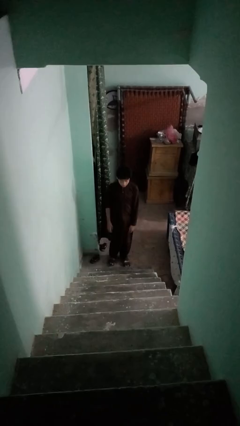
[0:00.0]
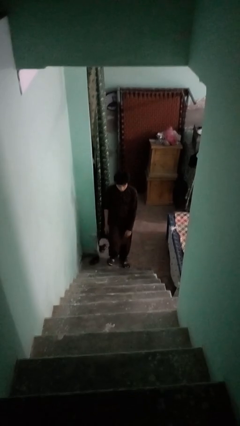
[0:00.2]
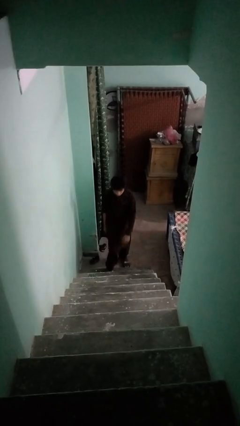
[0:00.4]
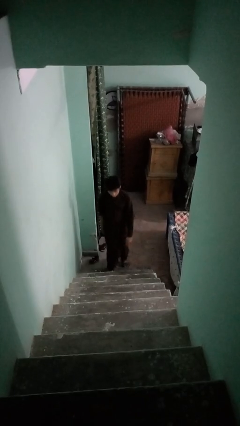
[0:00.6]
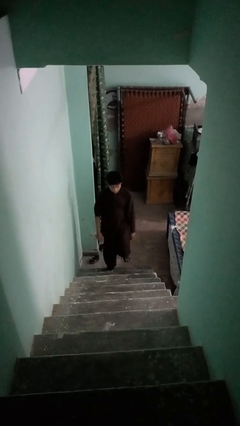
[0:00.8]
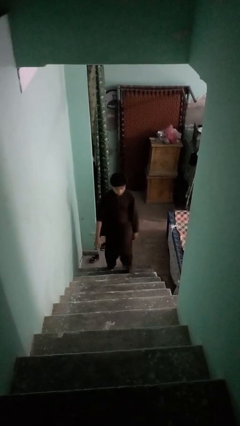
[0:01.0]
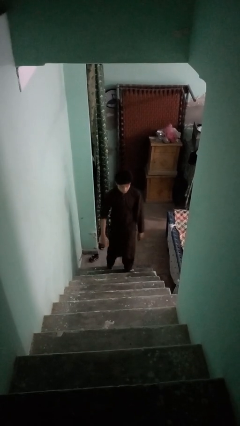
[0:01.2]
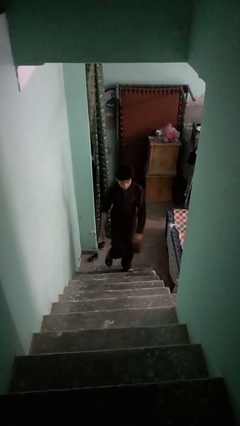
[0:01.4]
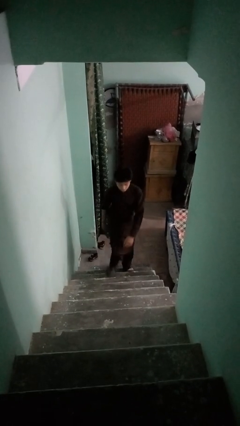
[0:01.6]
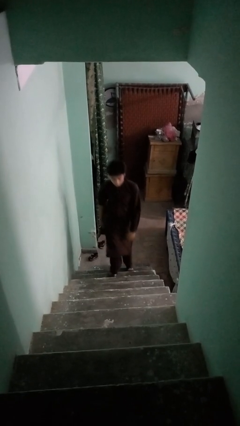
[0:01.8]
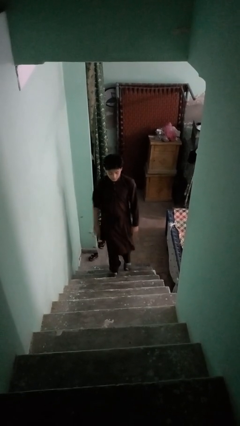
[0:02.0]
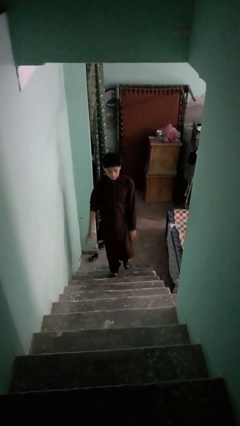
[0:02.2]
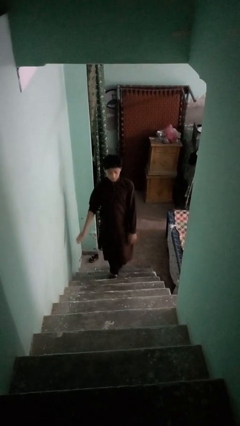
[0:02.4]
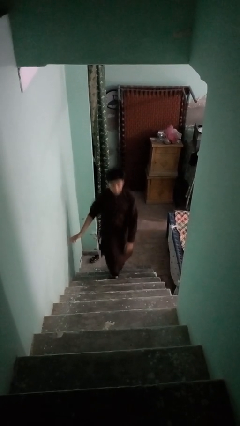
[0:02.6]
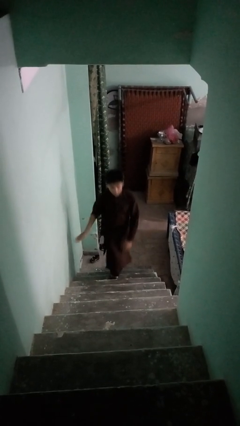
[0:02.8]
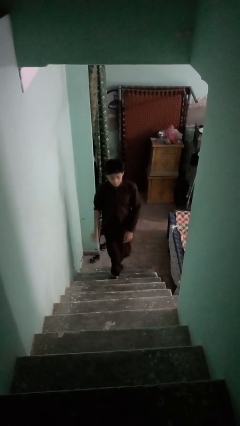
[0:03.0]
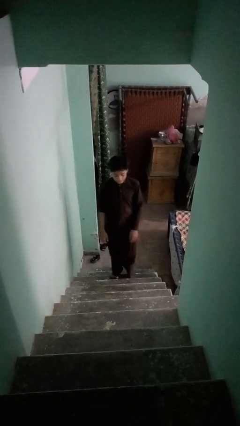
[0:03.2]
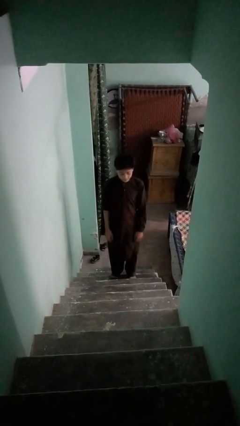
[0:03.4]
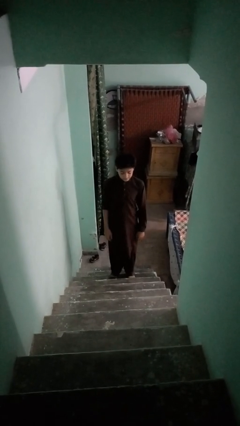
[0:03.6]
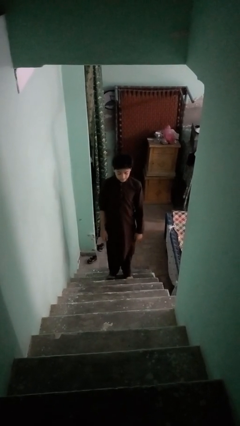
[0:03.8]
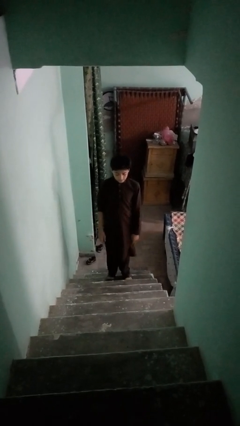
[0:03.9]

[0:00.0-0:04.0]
person climbs up stairs

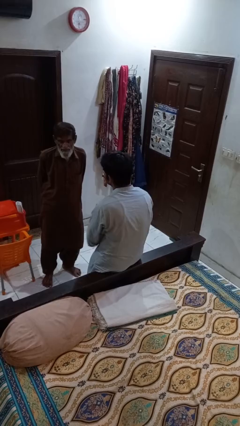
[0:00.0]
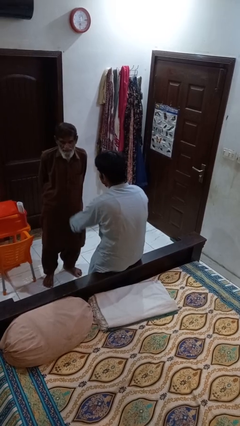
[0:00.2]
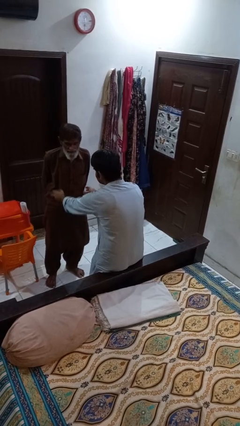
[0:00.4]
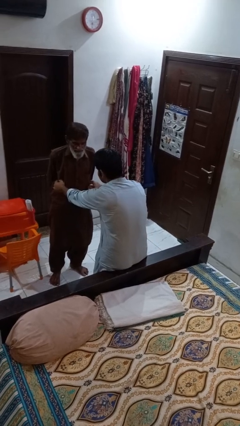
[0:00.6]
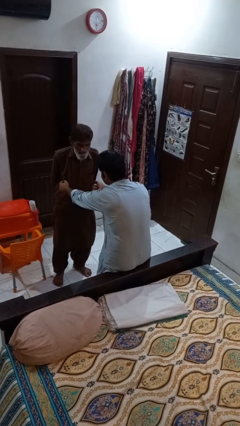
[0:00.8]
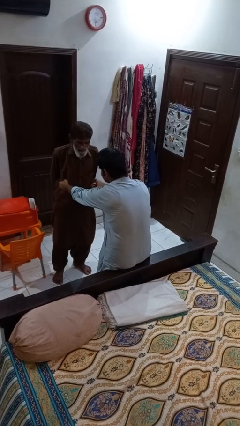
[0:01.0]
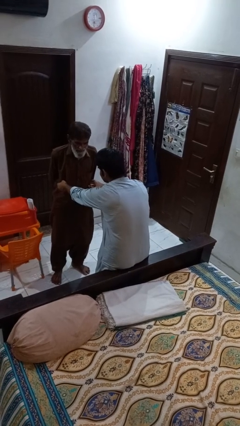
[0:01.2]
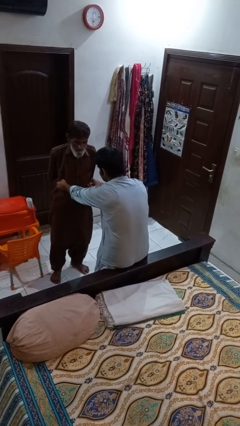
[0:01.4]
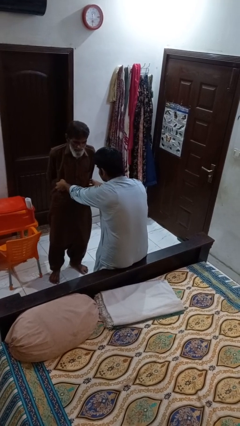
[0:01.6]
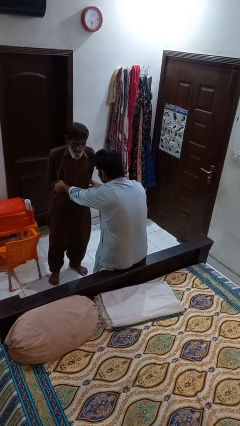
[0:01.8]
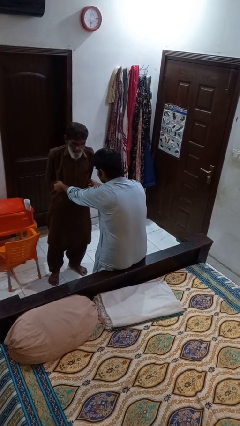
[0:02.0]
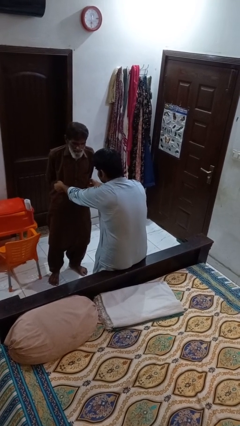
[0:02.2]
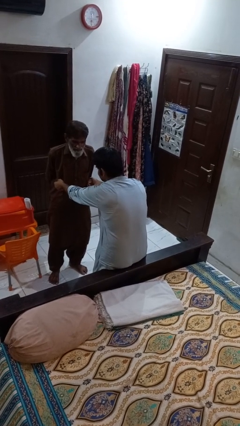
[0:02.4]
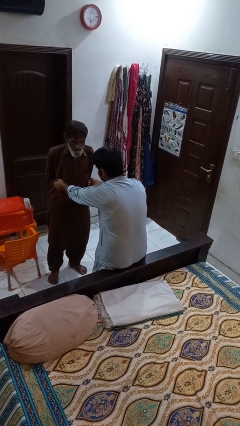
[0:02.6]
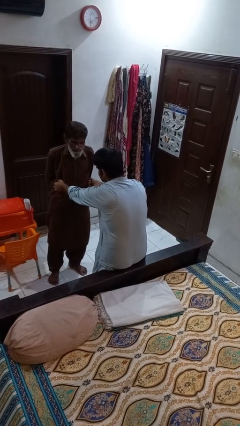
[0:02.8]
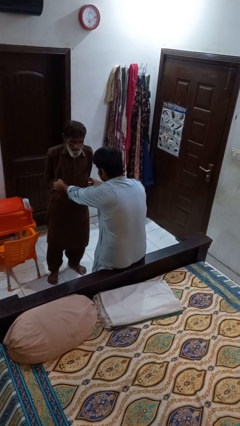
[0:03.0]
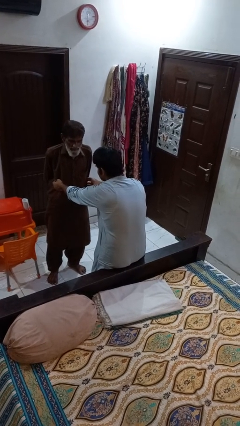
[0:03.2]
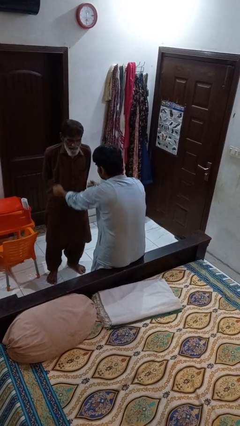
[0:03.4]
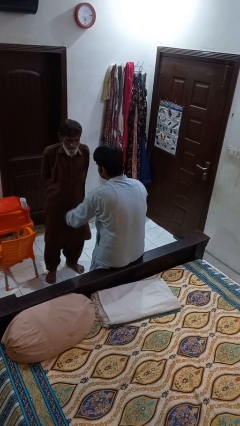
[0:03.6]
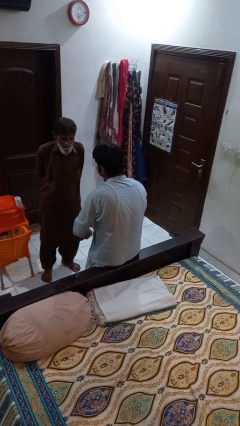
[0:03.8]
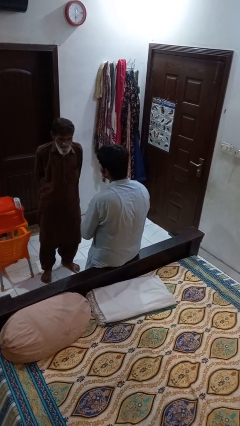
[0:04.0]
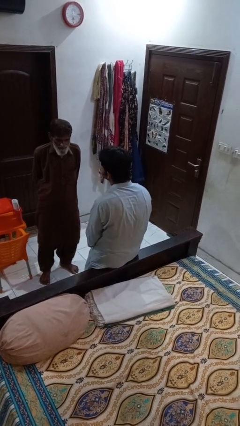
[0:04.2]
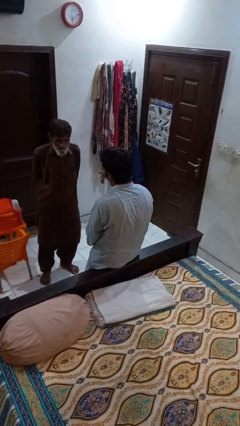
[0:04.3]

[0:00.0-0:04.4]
person tickles person

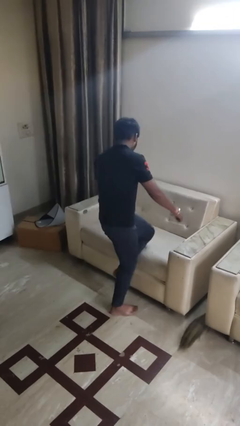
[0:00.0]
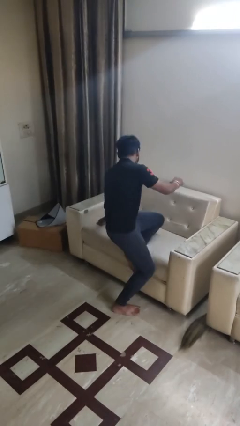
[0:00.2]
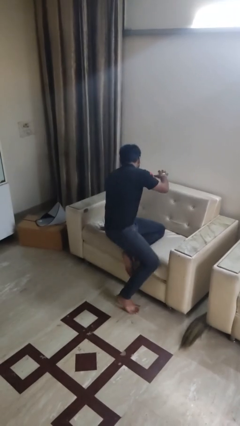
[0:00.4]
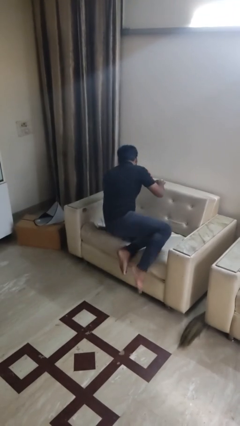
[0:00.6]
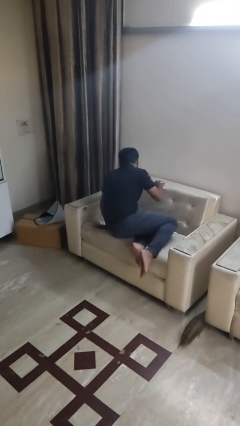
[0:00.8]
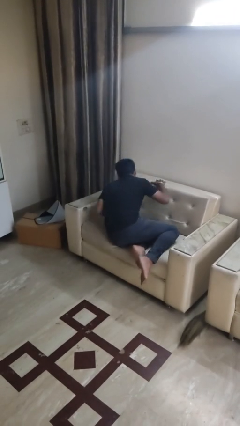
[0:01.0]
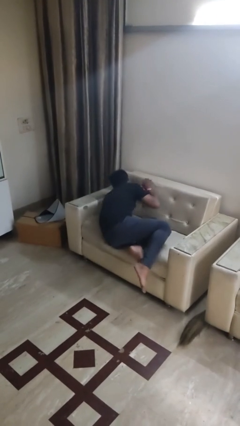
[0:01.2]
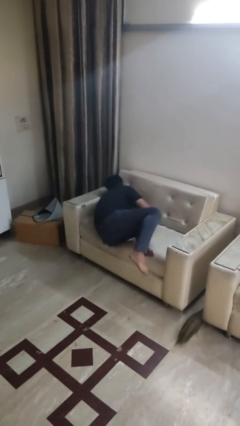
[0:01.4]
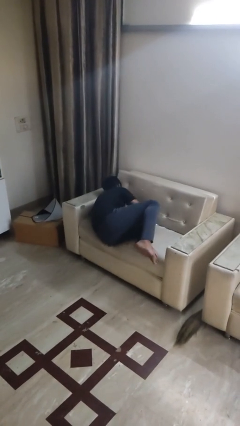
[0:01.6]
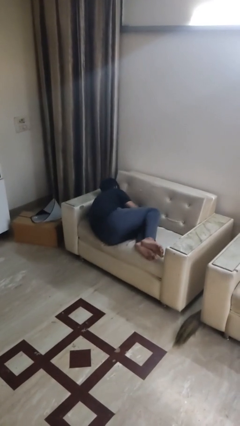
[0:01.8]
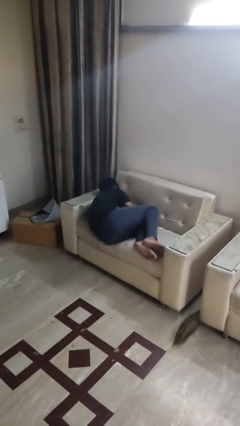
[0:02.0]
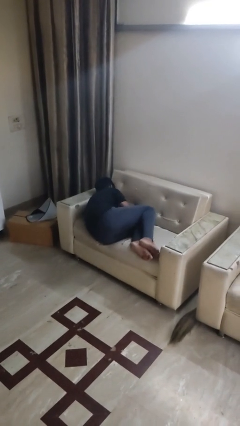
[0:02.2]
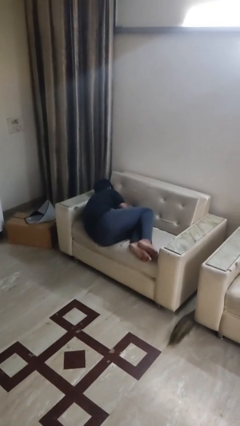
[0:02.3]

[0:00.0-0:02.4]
person lies down on bed

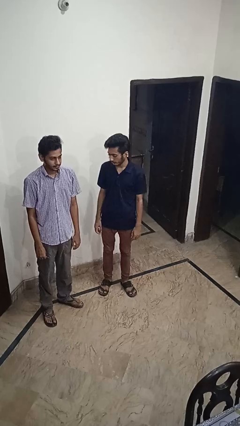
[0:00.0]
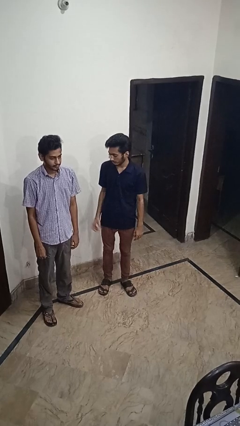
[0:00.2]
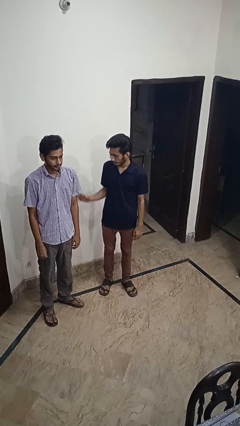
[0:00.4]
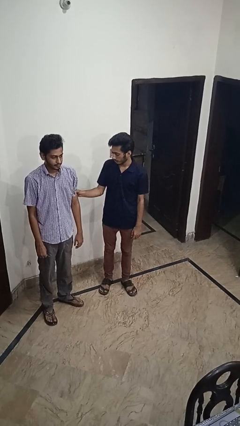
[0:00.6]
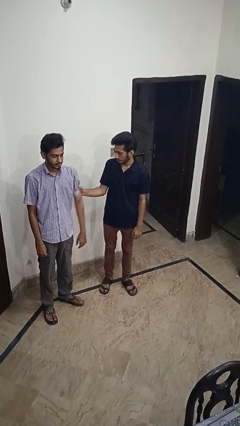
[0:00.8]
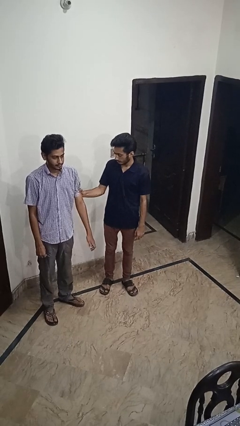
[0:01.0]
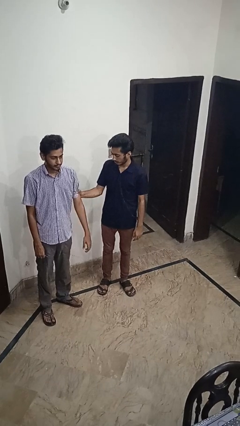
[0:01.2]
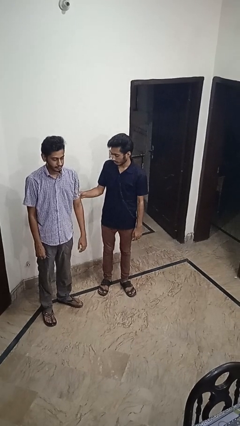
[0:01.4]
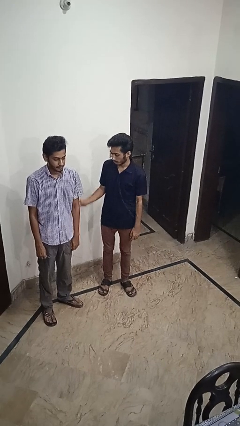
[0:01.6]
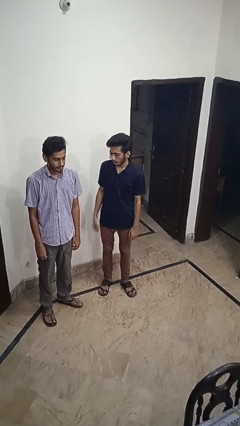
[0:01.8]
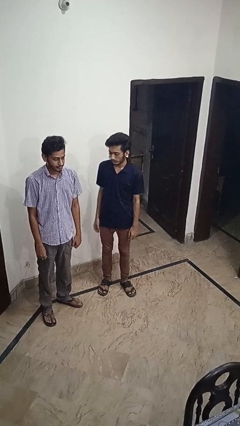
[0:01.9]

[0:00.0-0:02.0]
person grabs person by bicep

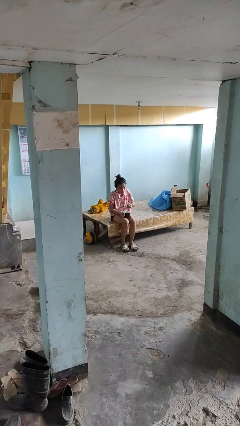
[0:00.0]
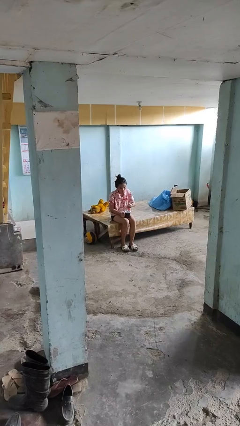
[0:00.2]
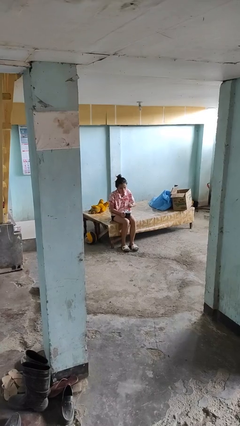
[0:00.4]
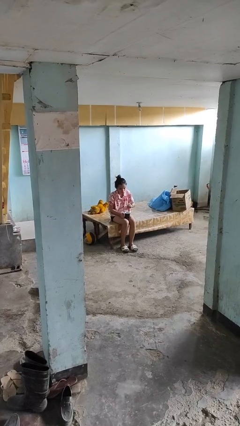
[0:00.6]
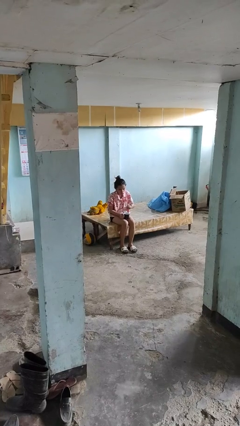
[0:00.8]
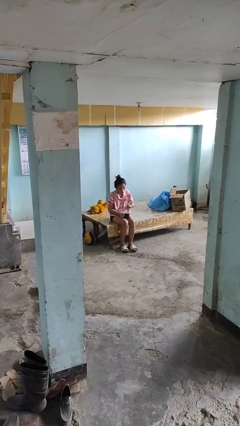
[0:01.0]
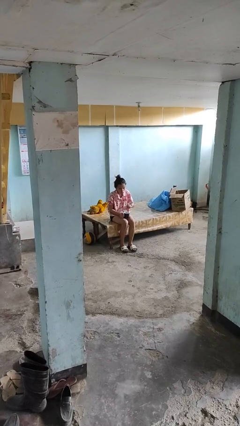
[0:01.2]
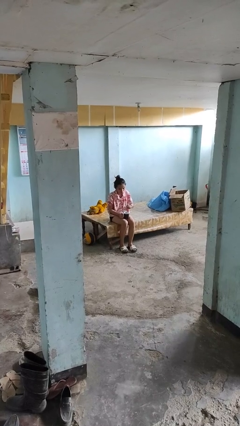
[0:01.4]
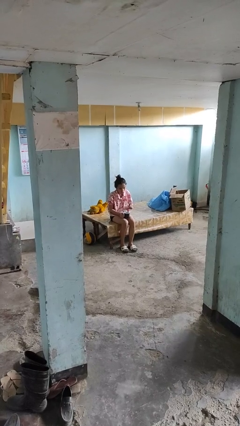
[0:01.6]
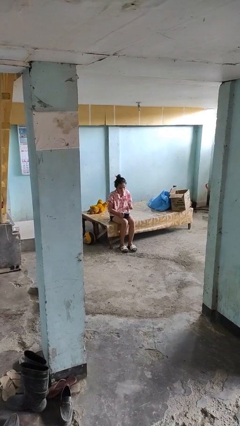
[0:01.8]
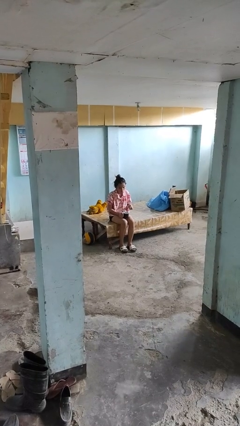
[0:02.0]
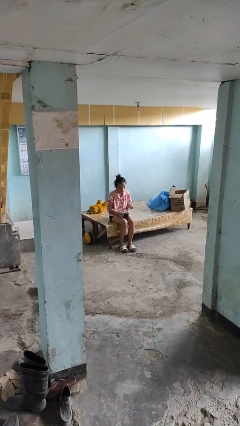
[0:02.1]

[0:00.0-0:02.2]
person stirs mug

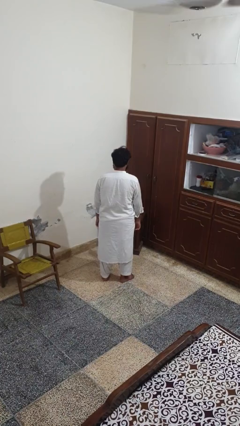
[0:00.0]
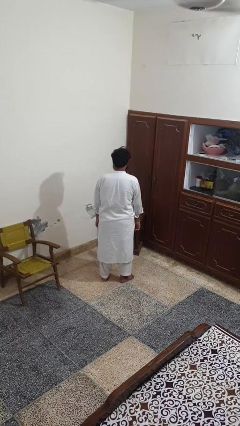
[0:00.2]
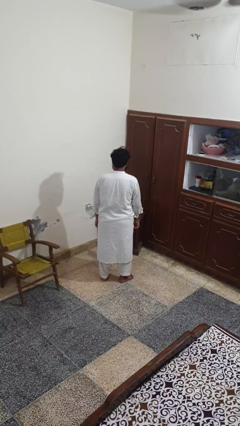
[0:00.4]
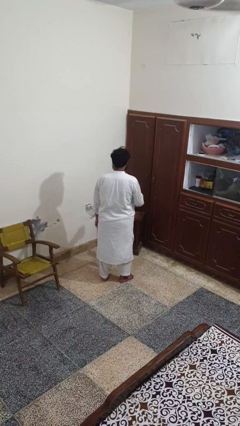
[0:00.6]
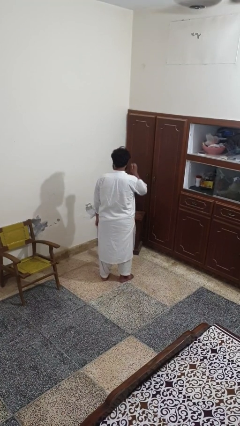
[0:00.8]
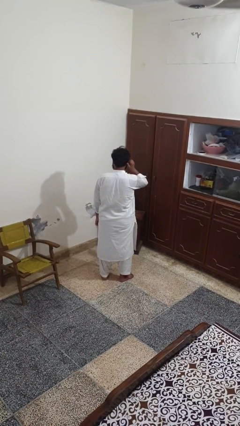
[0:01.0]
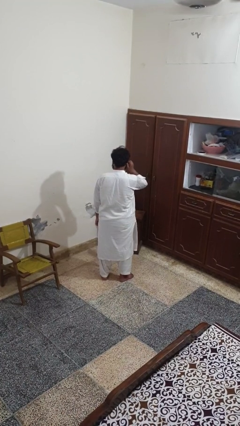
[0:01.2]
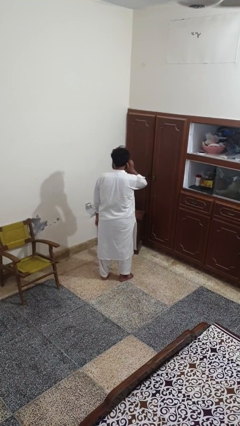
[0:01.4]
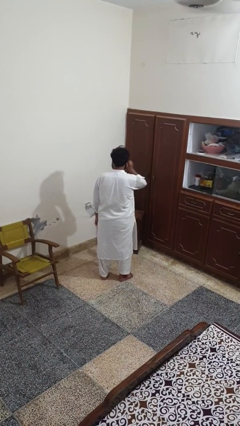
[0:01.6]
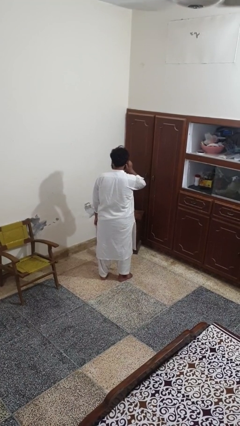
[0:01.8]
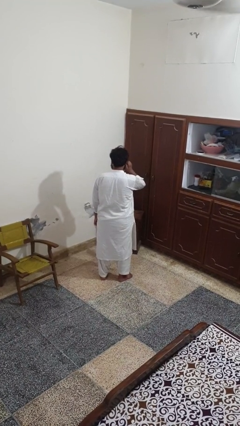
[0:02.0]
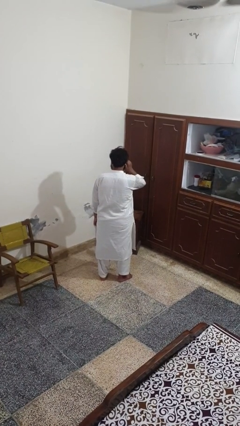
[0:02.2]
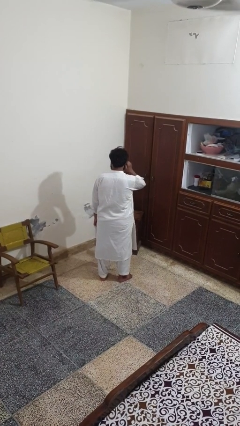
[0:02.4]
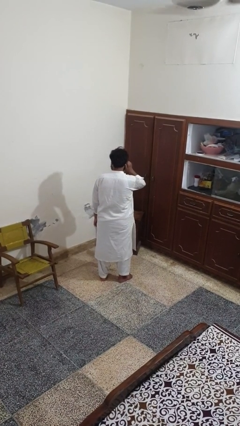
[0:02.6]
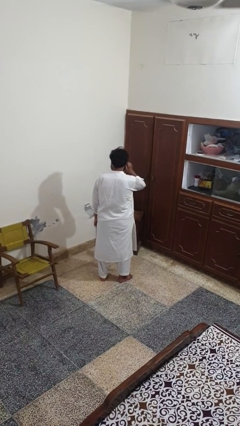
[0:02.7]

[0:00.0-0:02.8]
person touches earlobe
